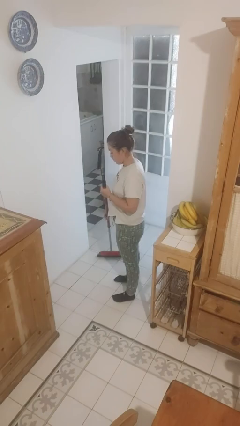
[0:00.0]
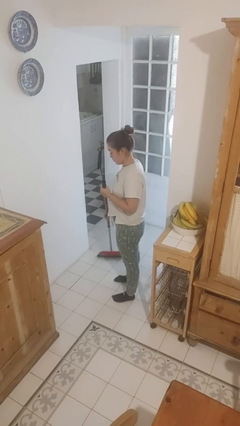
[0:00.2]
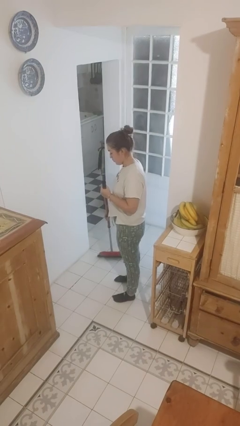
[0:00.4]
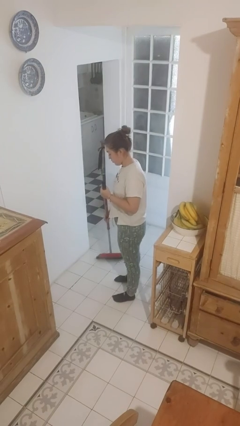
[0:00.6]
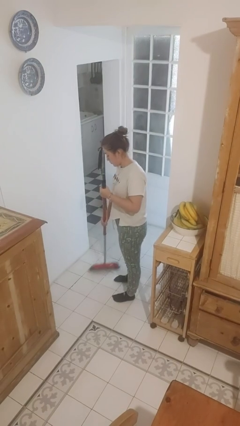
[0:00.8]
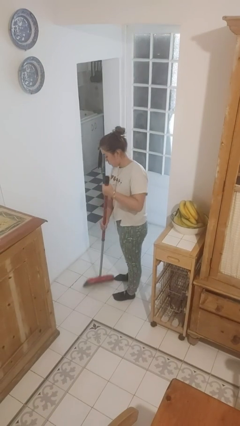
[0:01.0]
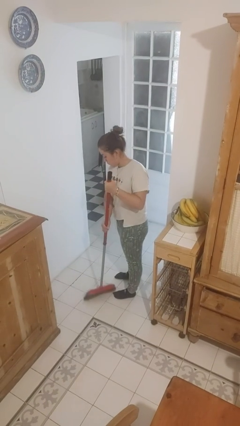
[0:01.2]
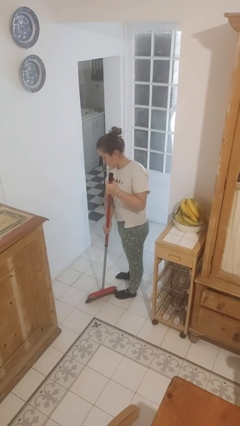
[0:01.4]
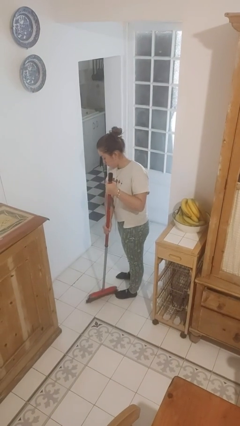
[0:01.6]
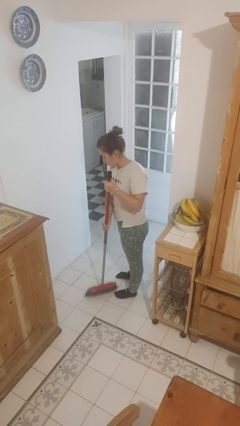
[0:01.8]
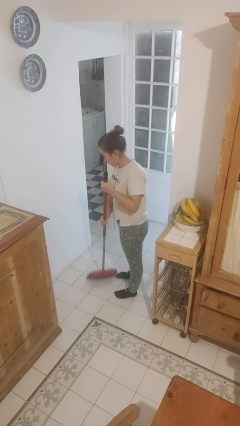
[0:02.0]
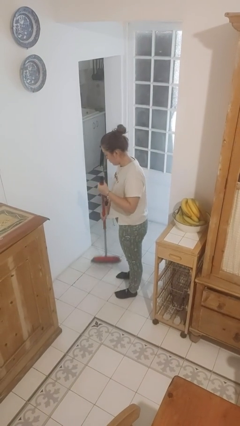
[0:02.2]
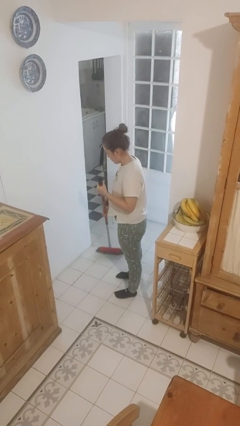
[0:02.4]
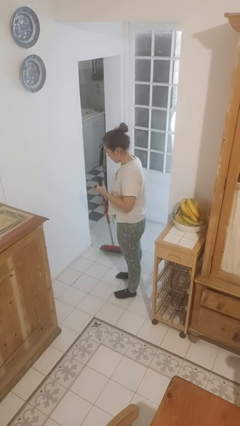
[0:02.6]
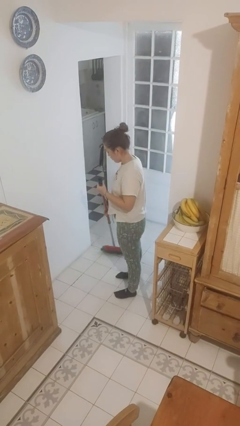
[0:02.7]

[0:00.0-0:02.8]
person sweeps floor

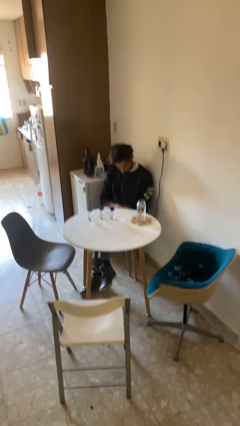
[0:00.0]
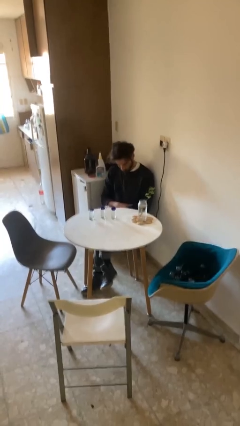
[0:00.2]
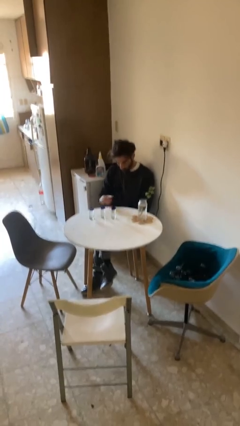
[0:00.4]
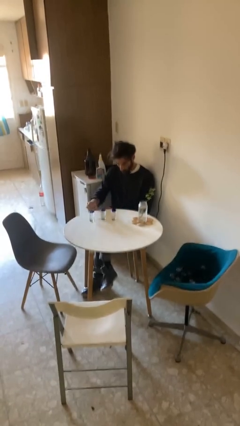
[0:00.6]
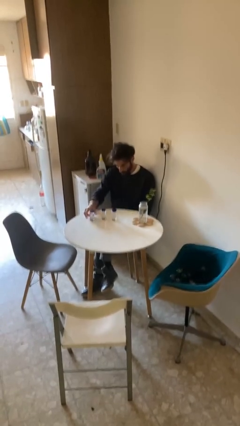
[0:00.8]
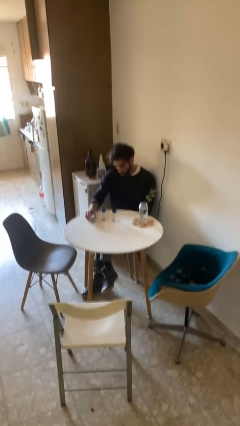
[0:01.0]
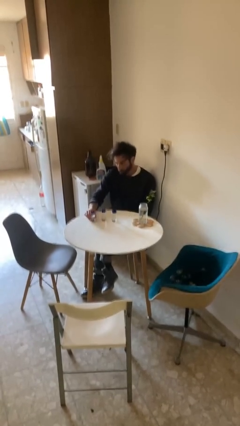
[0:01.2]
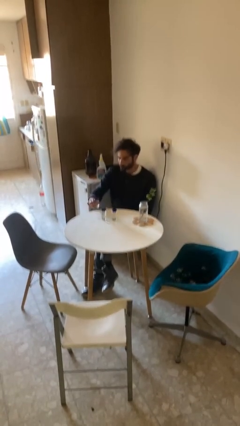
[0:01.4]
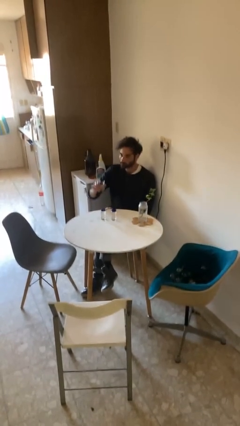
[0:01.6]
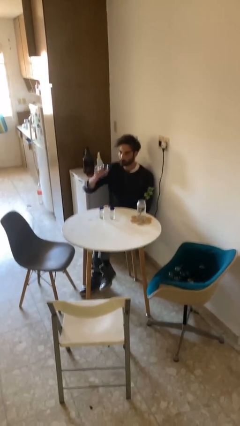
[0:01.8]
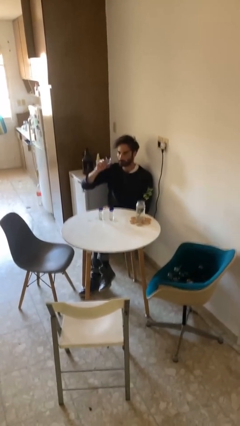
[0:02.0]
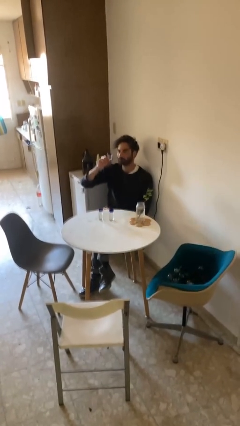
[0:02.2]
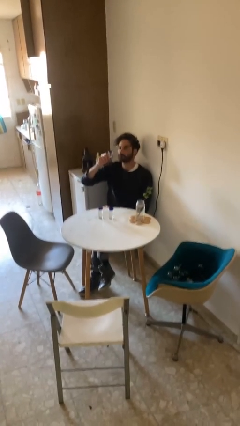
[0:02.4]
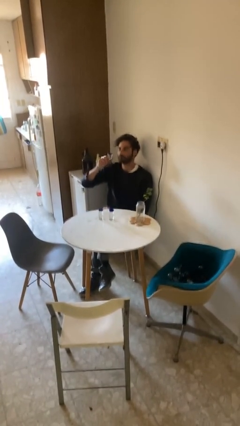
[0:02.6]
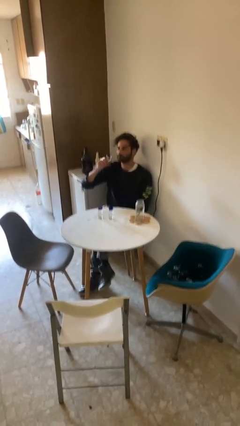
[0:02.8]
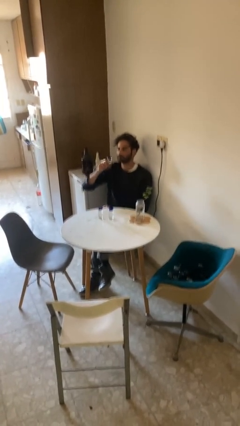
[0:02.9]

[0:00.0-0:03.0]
person picks up object from table

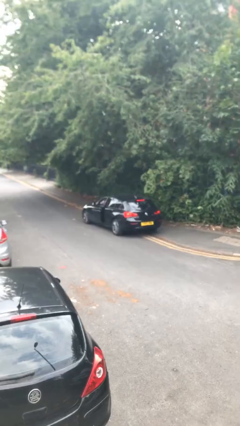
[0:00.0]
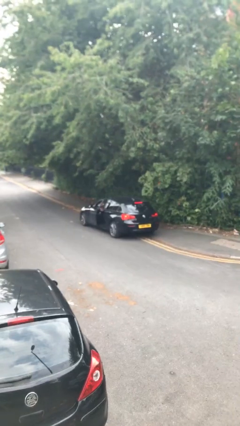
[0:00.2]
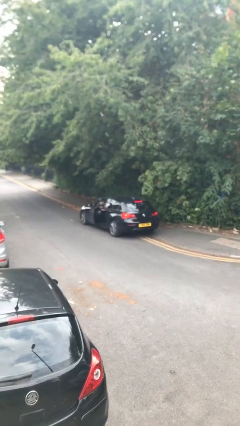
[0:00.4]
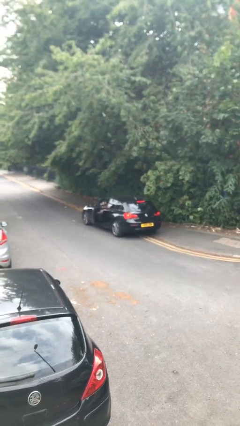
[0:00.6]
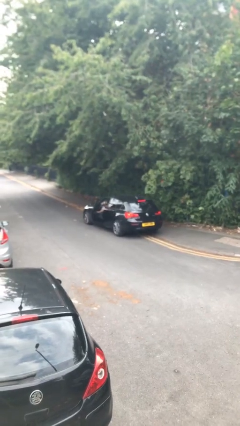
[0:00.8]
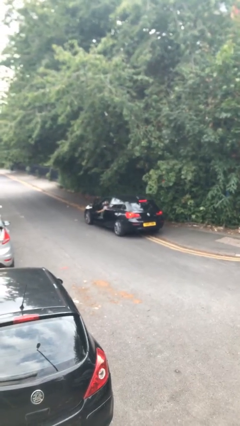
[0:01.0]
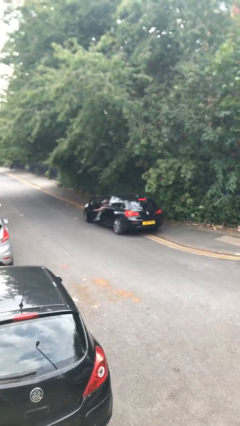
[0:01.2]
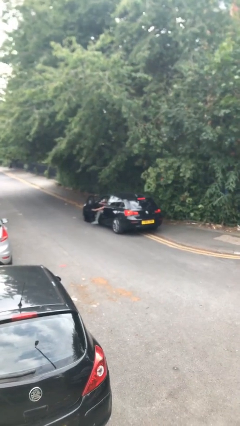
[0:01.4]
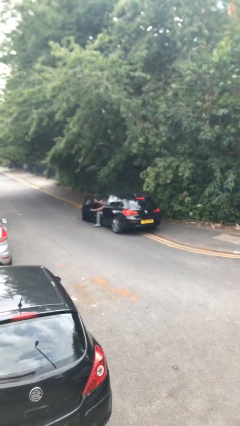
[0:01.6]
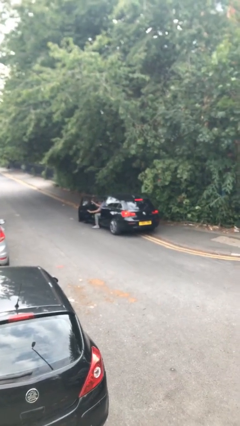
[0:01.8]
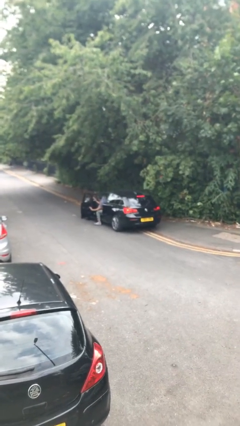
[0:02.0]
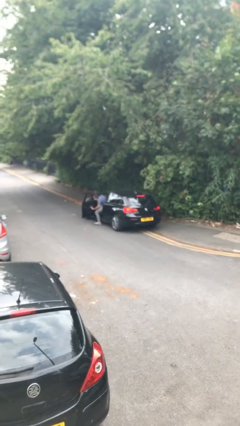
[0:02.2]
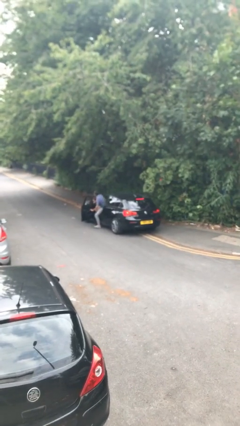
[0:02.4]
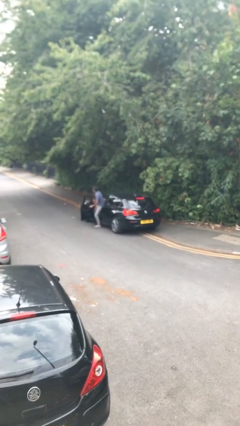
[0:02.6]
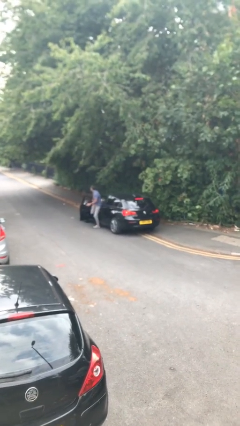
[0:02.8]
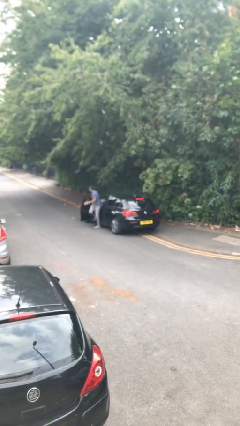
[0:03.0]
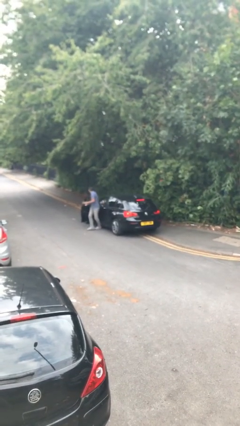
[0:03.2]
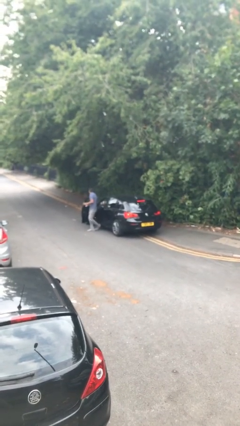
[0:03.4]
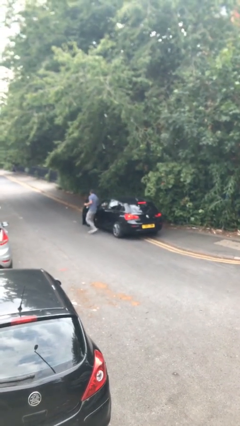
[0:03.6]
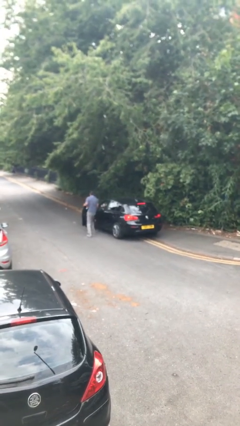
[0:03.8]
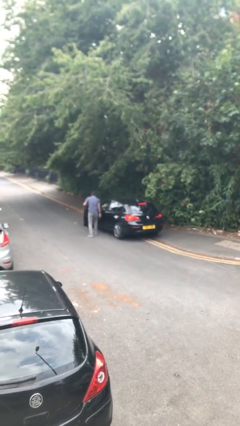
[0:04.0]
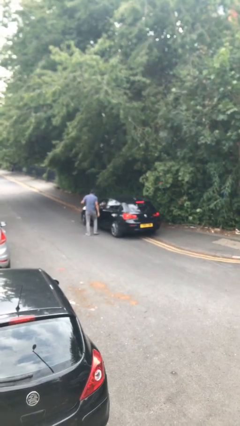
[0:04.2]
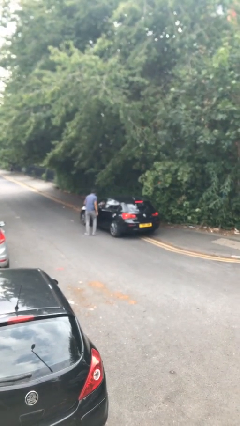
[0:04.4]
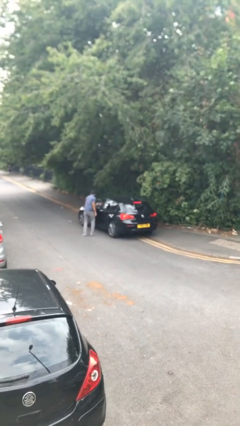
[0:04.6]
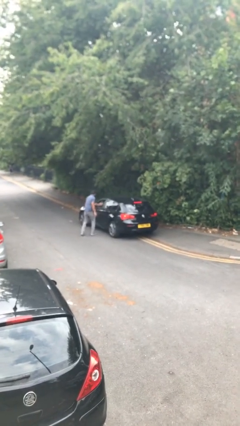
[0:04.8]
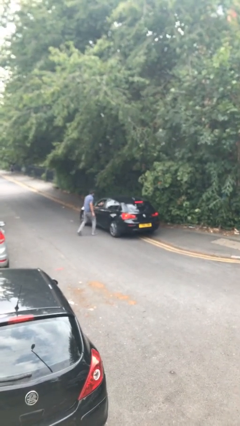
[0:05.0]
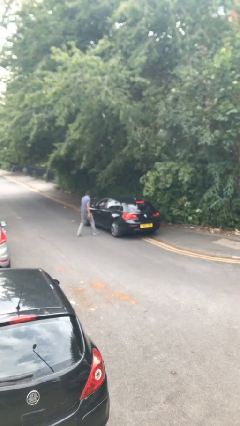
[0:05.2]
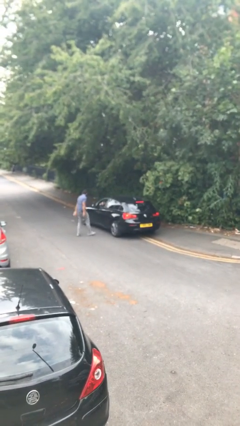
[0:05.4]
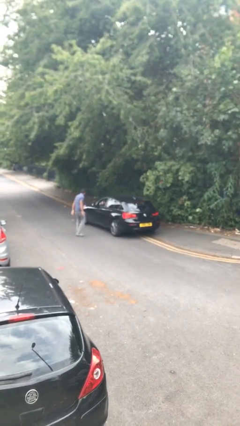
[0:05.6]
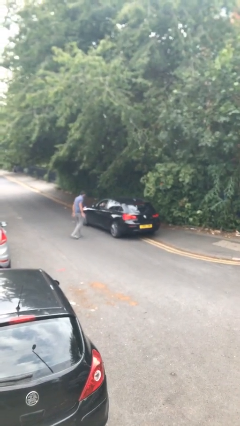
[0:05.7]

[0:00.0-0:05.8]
car drops off person

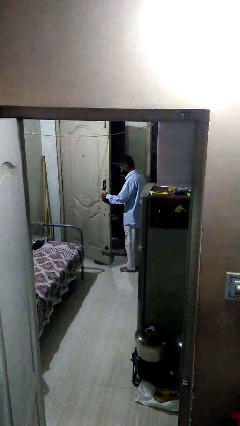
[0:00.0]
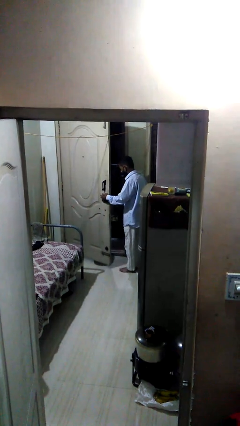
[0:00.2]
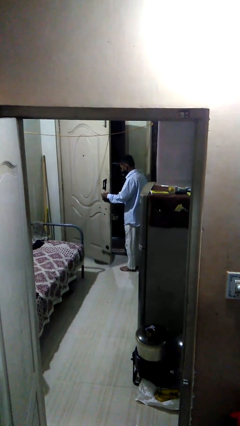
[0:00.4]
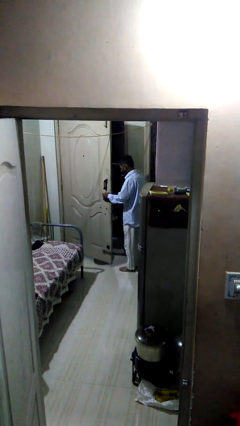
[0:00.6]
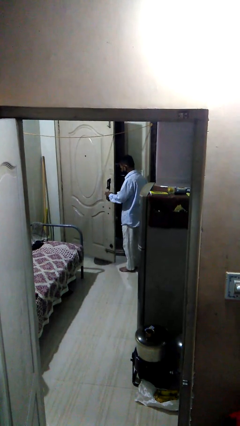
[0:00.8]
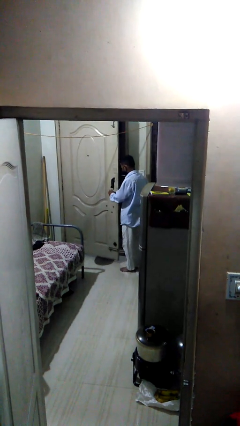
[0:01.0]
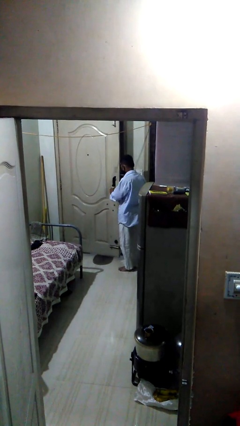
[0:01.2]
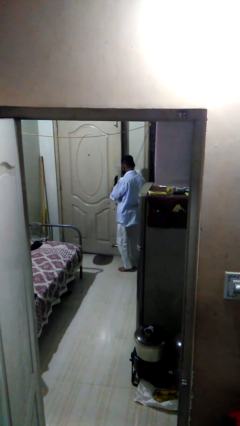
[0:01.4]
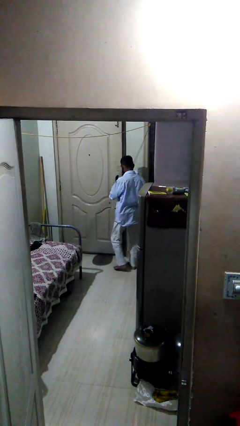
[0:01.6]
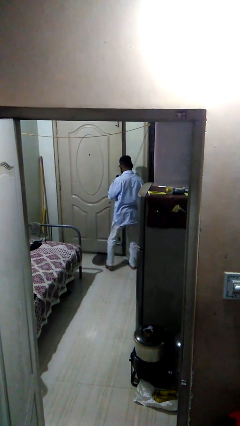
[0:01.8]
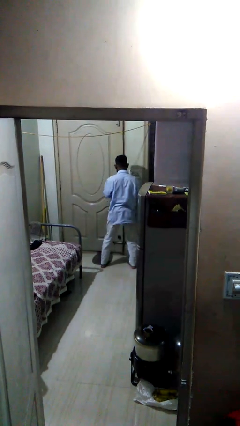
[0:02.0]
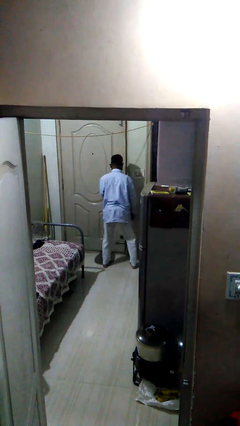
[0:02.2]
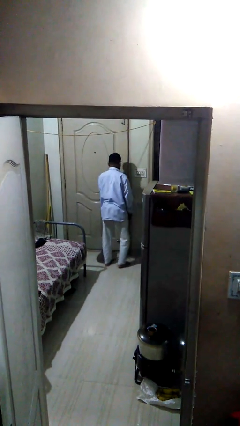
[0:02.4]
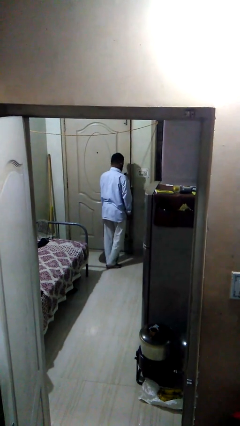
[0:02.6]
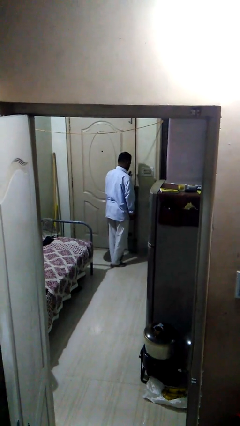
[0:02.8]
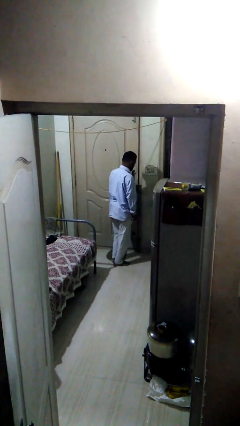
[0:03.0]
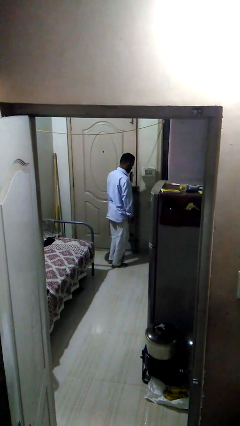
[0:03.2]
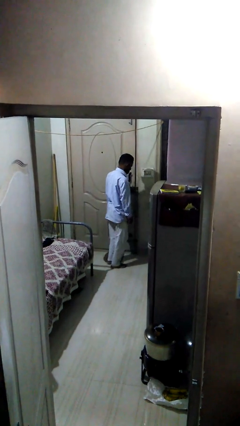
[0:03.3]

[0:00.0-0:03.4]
person closes facility door

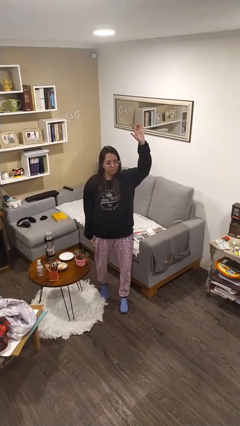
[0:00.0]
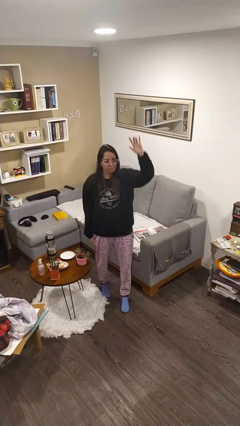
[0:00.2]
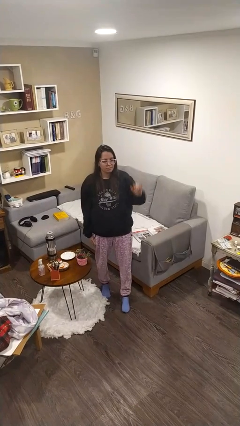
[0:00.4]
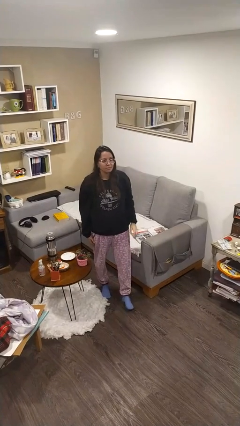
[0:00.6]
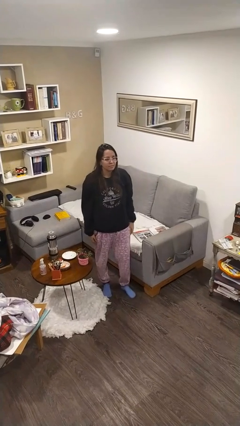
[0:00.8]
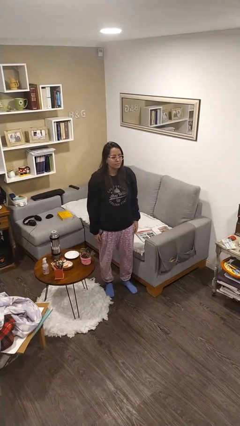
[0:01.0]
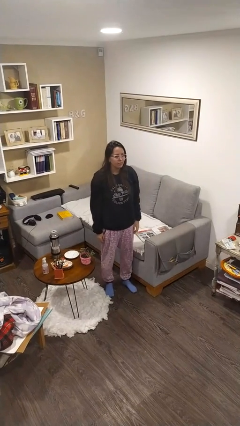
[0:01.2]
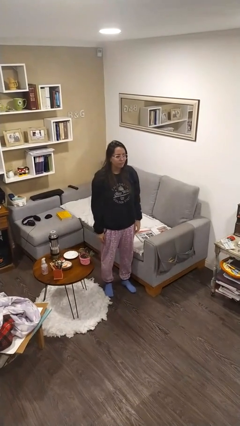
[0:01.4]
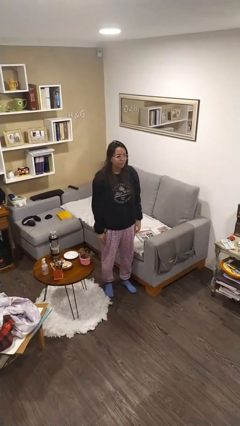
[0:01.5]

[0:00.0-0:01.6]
person gestures lower hand

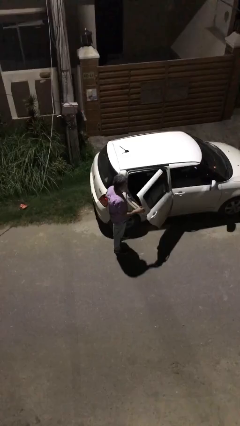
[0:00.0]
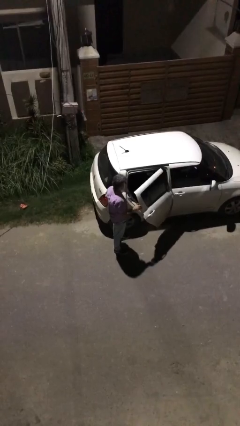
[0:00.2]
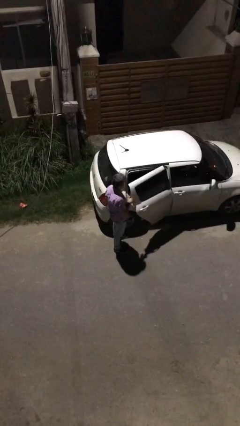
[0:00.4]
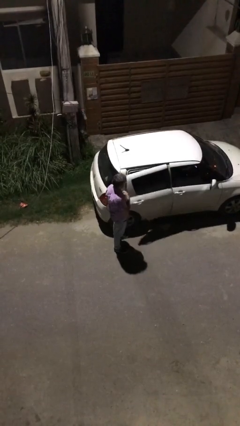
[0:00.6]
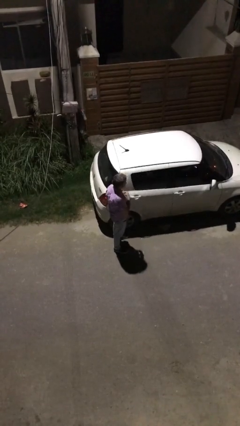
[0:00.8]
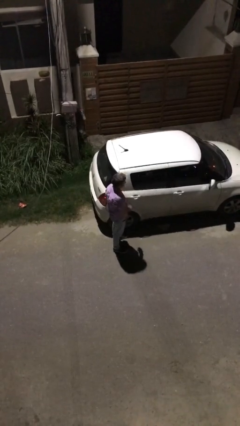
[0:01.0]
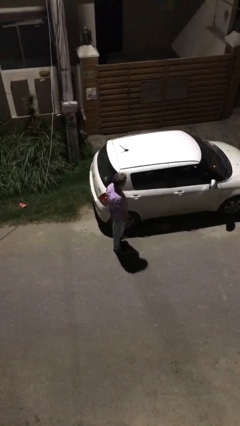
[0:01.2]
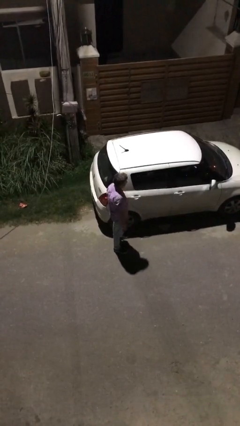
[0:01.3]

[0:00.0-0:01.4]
person closes car door
